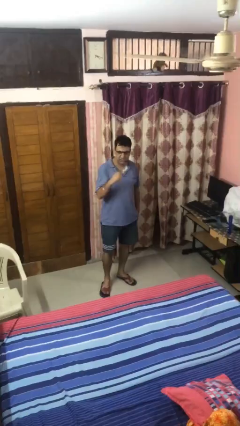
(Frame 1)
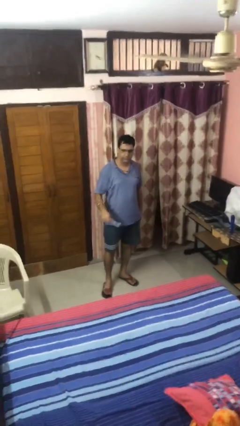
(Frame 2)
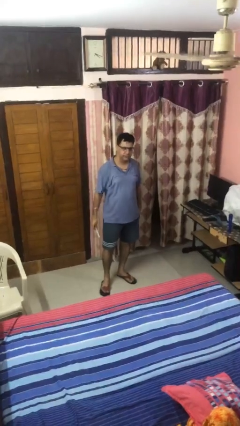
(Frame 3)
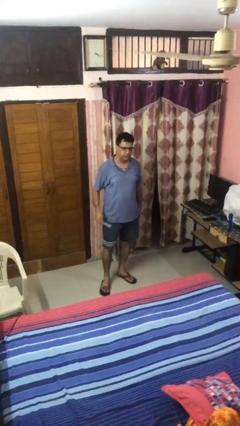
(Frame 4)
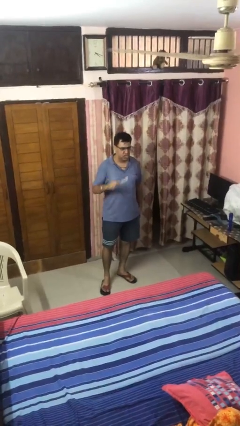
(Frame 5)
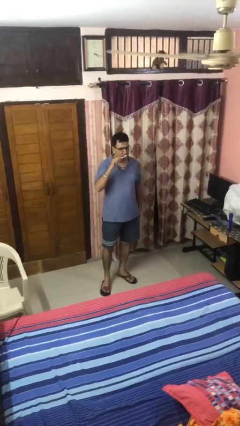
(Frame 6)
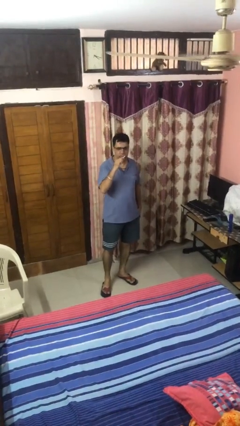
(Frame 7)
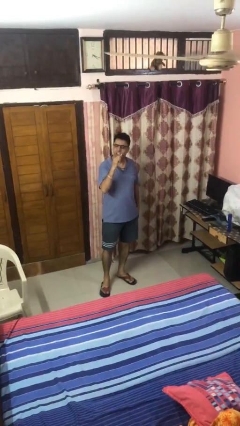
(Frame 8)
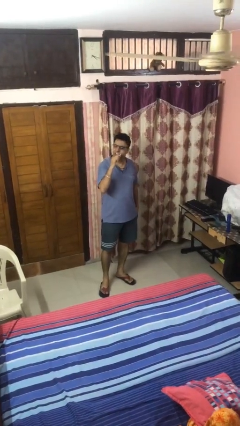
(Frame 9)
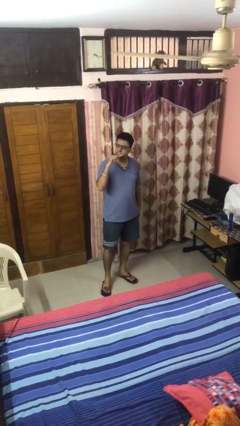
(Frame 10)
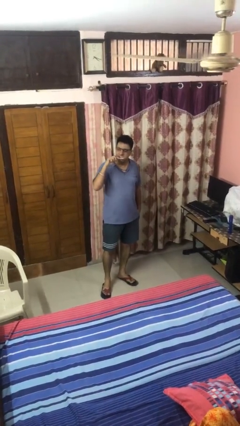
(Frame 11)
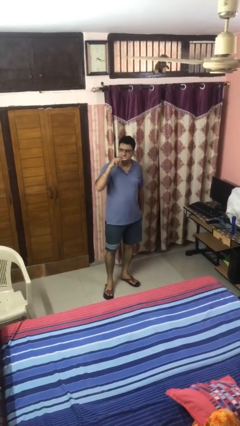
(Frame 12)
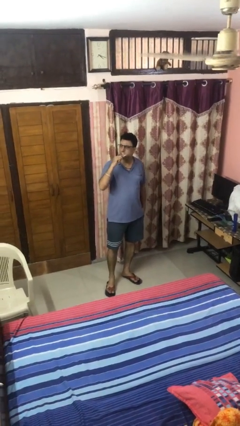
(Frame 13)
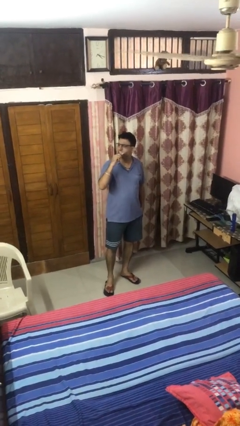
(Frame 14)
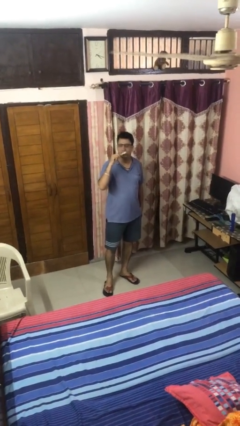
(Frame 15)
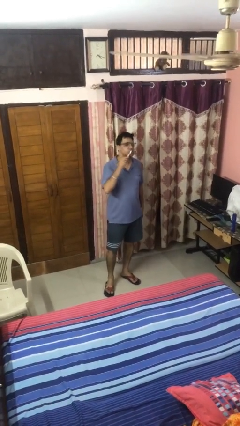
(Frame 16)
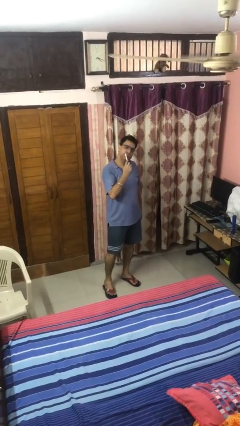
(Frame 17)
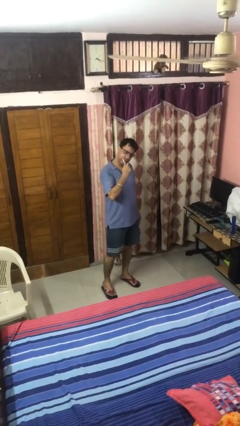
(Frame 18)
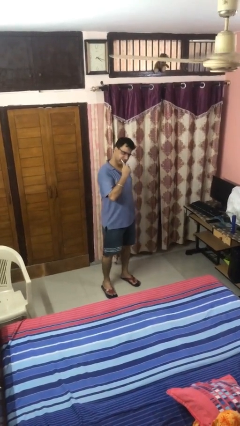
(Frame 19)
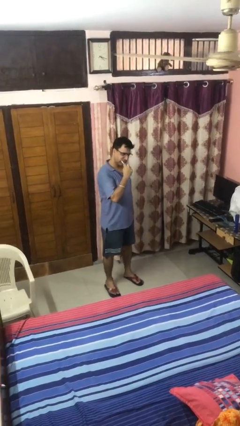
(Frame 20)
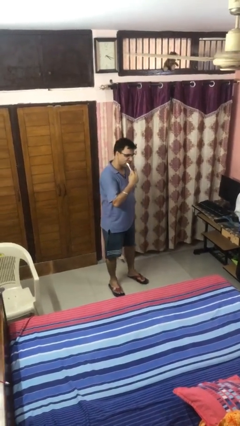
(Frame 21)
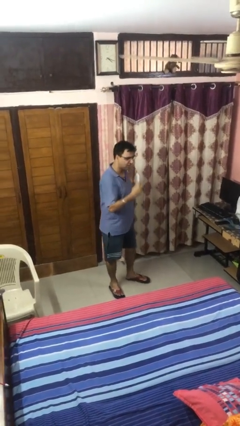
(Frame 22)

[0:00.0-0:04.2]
person brushes teeth

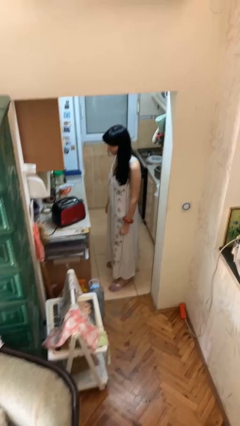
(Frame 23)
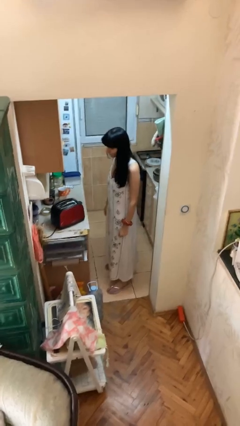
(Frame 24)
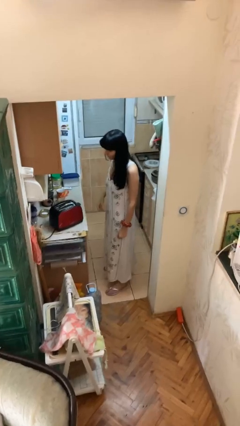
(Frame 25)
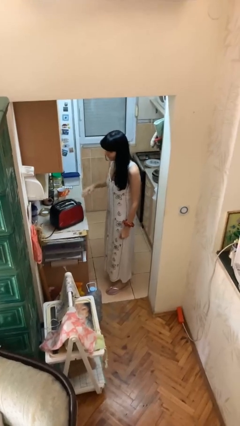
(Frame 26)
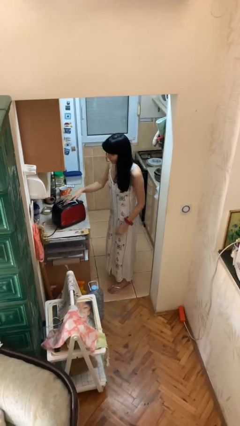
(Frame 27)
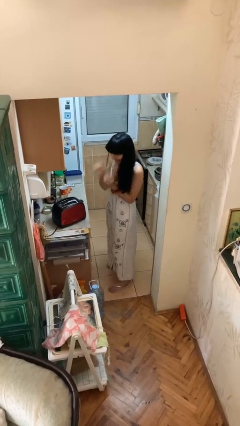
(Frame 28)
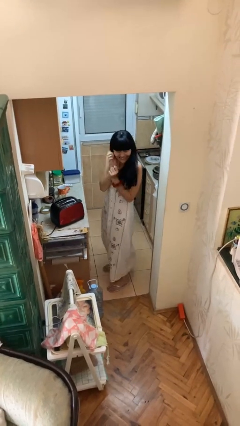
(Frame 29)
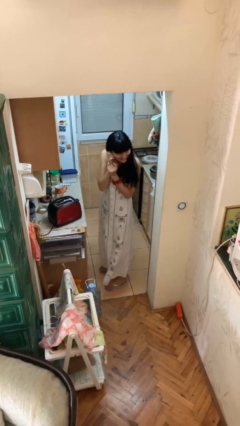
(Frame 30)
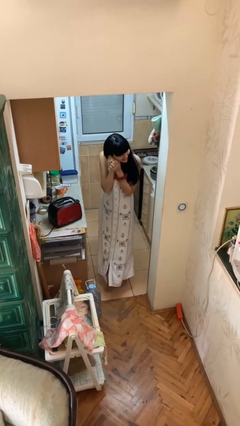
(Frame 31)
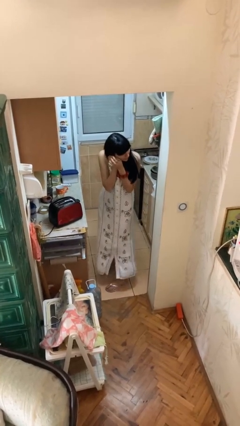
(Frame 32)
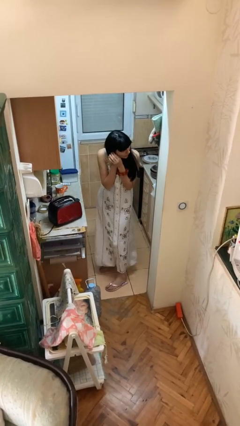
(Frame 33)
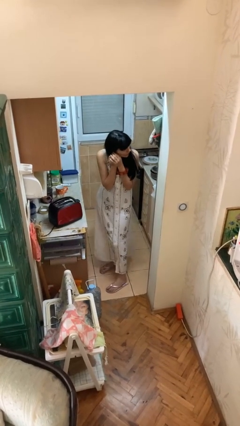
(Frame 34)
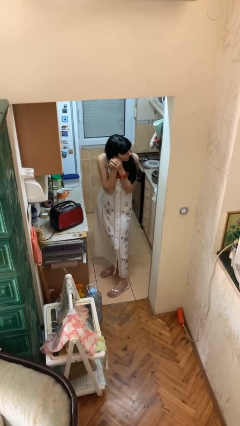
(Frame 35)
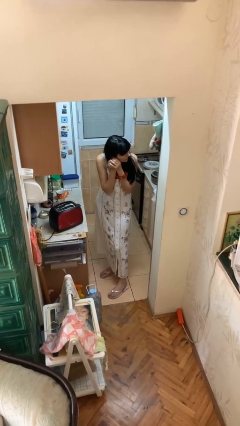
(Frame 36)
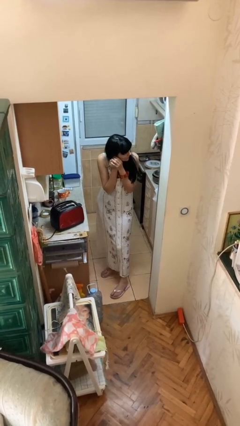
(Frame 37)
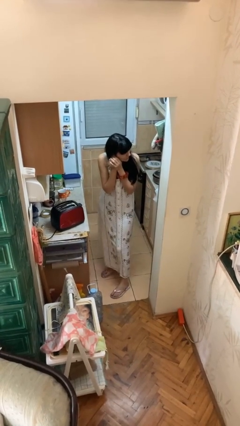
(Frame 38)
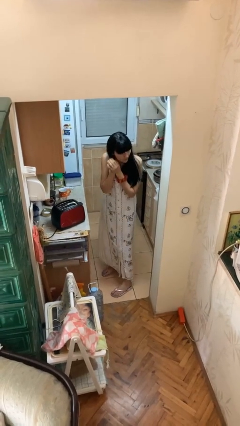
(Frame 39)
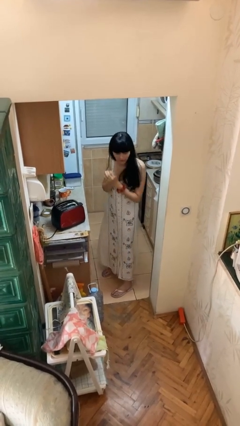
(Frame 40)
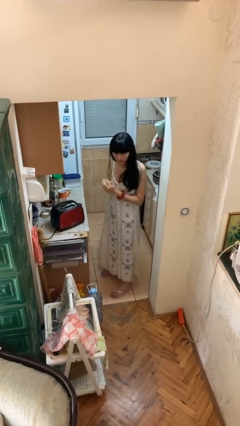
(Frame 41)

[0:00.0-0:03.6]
person burns hand

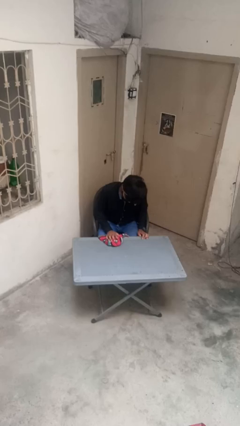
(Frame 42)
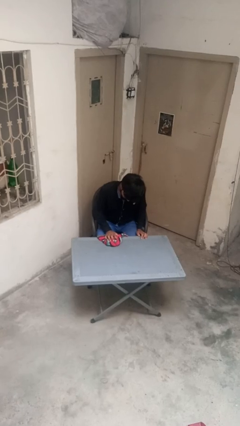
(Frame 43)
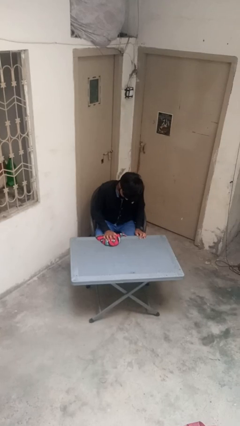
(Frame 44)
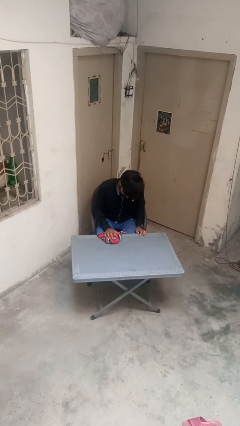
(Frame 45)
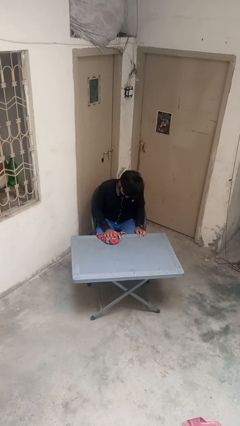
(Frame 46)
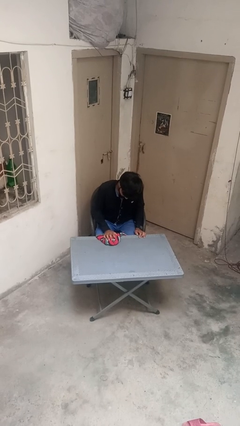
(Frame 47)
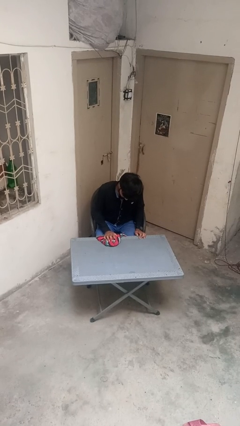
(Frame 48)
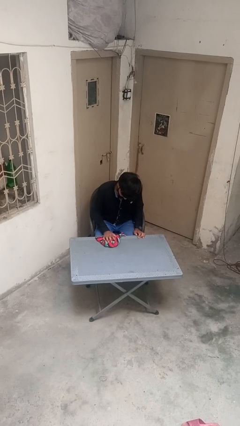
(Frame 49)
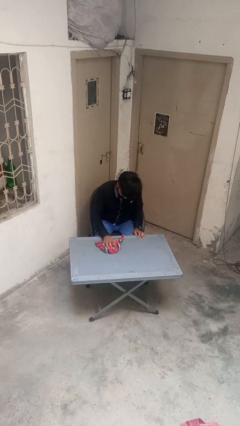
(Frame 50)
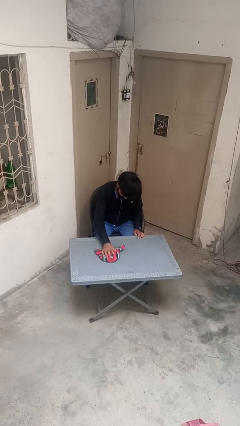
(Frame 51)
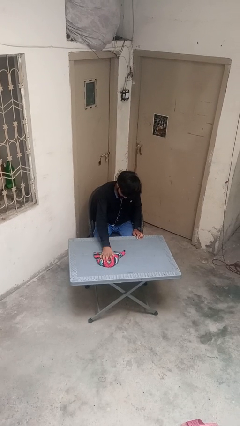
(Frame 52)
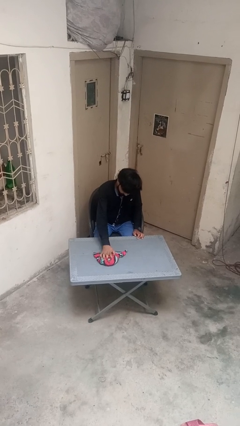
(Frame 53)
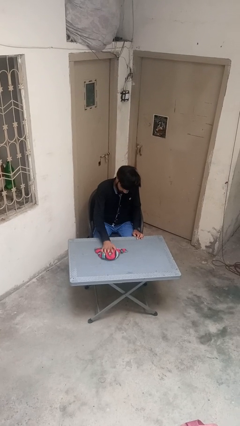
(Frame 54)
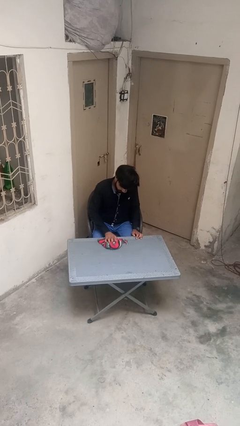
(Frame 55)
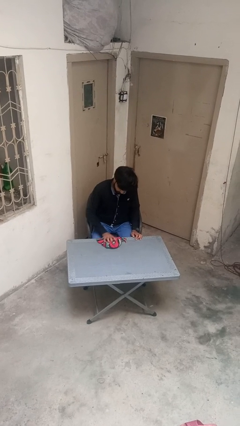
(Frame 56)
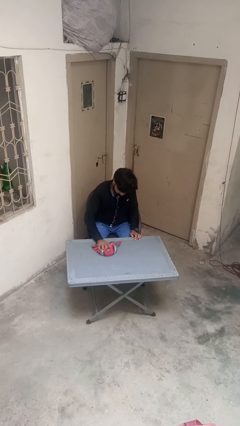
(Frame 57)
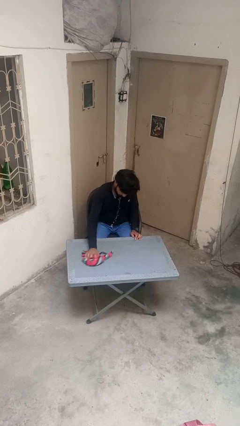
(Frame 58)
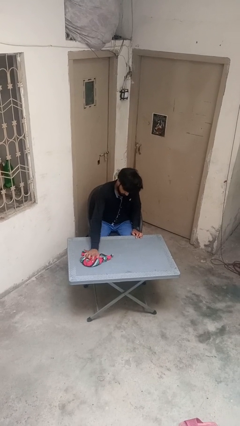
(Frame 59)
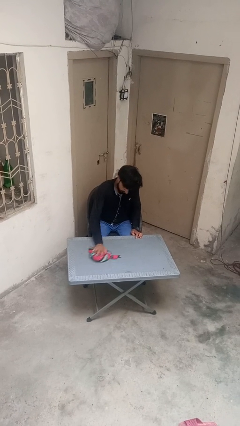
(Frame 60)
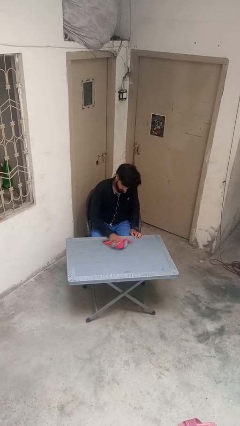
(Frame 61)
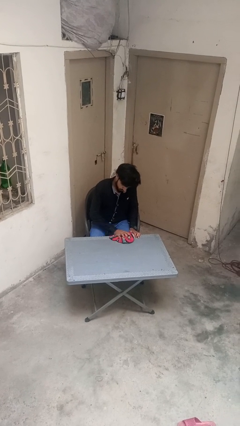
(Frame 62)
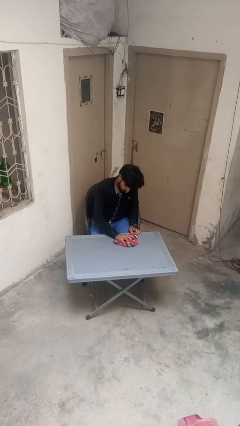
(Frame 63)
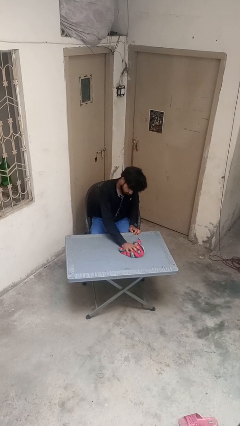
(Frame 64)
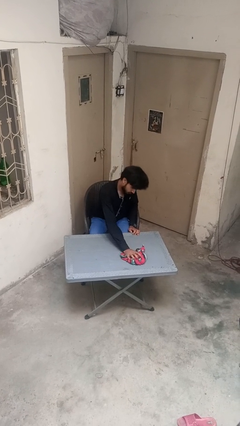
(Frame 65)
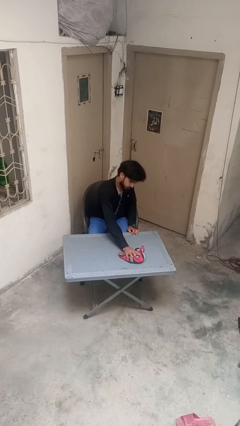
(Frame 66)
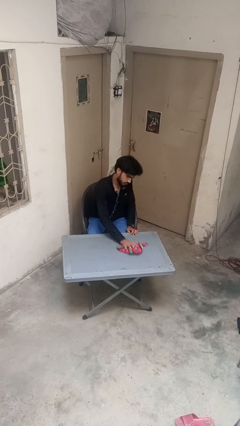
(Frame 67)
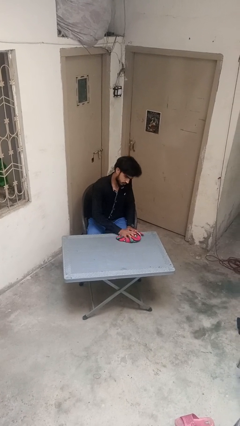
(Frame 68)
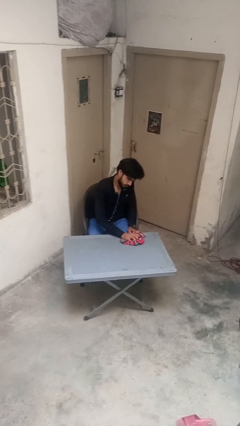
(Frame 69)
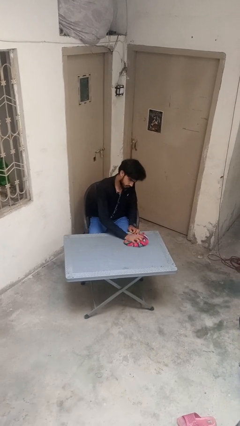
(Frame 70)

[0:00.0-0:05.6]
person cleans table with rag

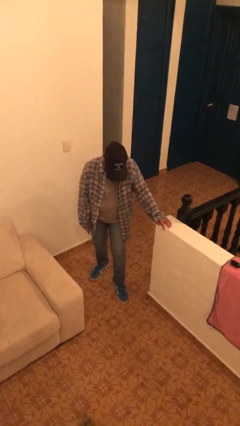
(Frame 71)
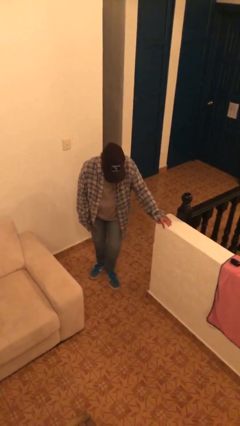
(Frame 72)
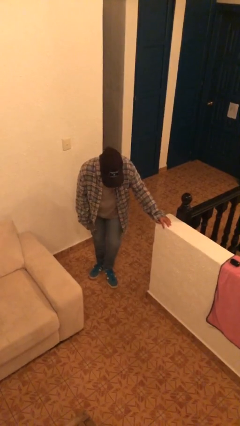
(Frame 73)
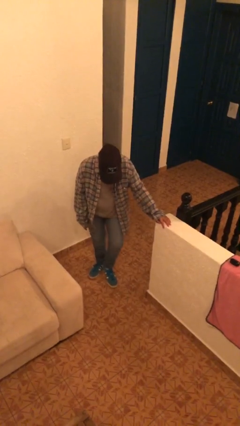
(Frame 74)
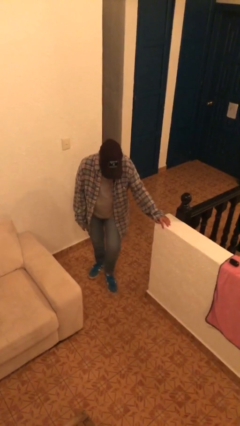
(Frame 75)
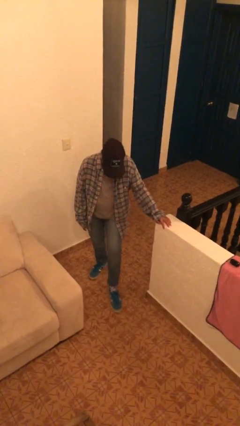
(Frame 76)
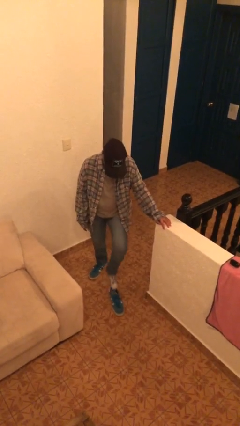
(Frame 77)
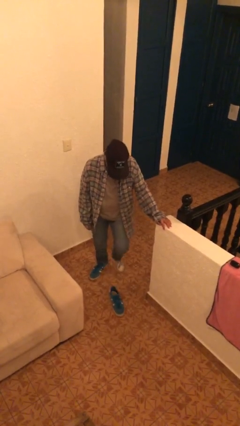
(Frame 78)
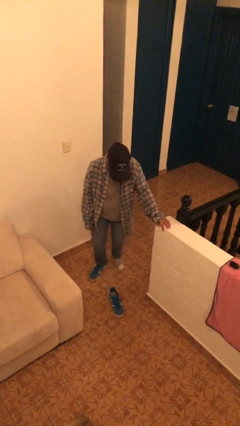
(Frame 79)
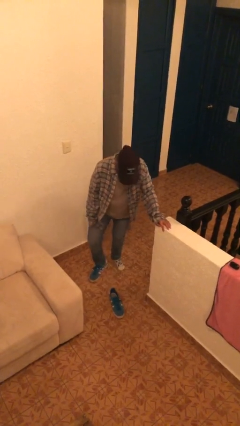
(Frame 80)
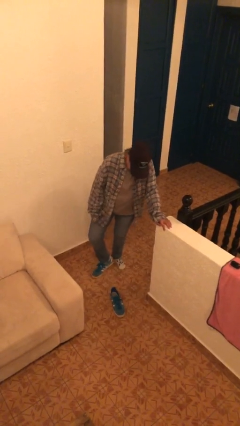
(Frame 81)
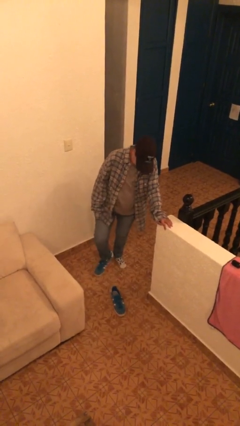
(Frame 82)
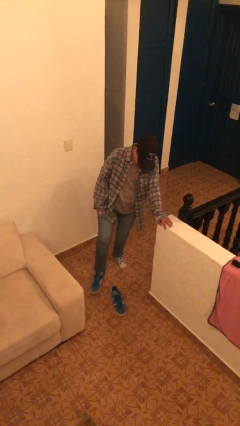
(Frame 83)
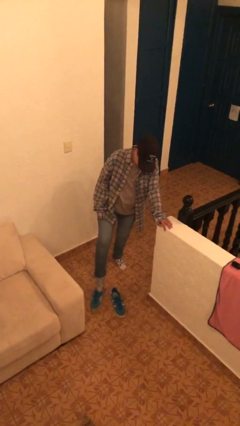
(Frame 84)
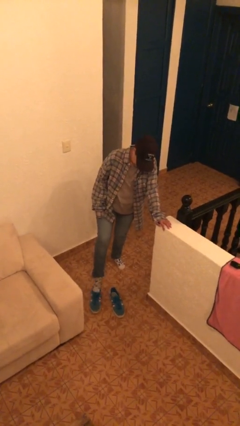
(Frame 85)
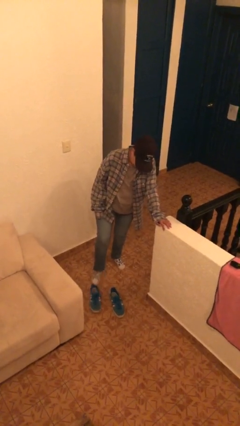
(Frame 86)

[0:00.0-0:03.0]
person takes off shoes

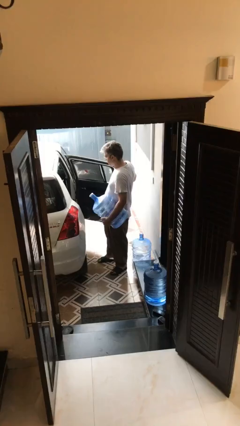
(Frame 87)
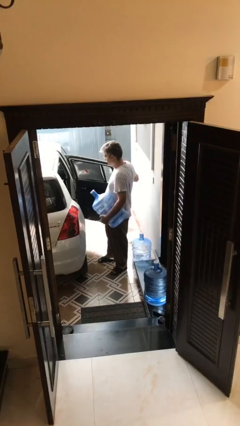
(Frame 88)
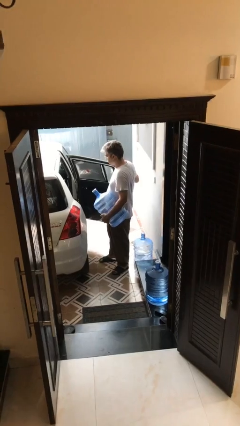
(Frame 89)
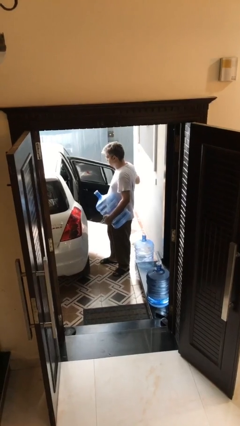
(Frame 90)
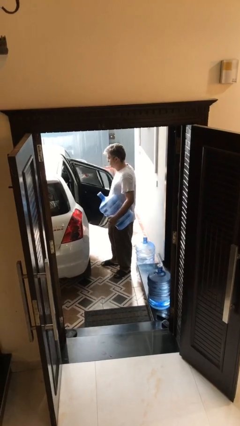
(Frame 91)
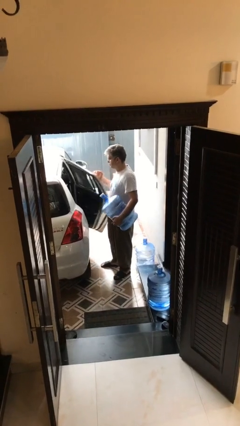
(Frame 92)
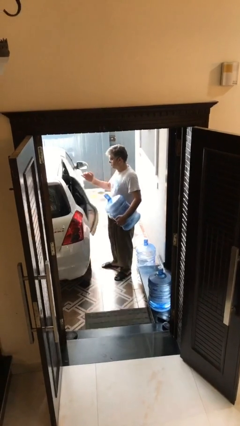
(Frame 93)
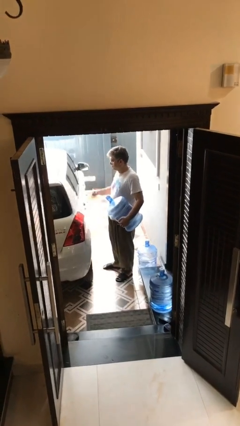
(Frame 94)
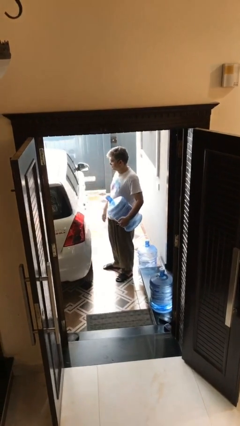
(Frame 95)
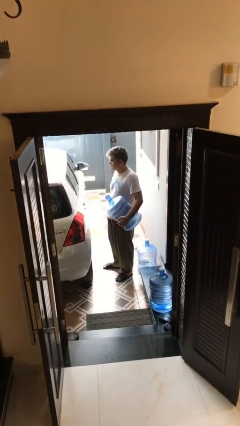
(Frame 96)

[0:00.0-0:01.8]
person closes car door
